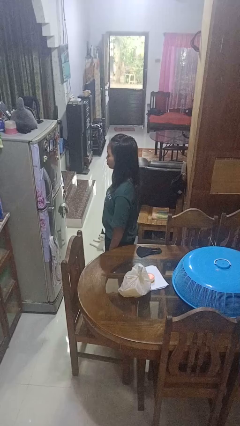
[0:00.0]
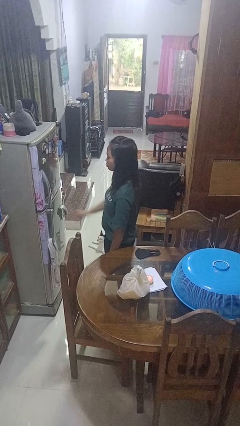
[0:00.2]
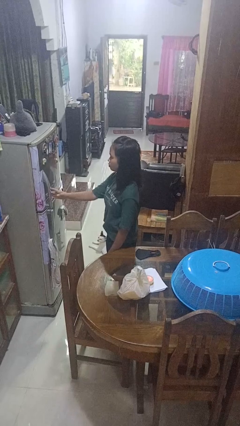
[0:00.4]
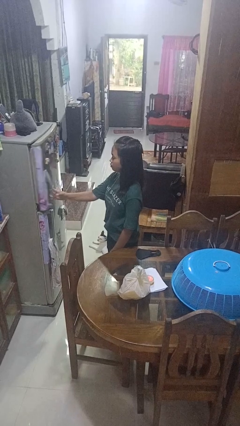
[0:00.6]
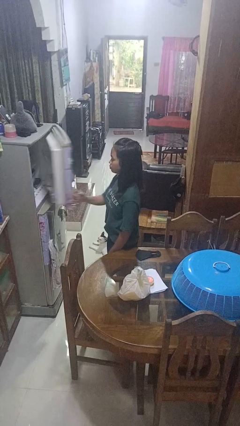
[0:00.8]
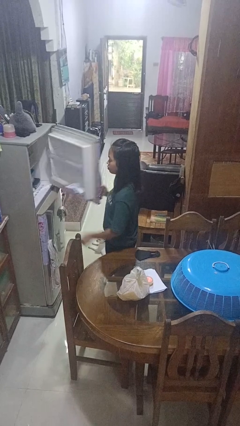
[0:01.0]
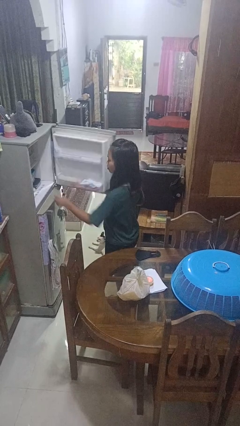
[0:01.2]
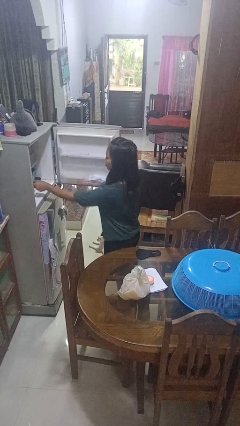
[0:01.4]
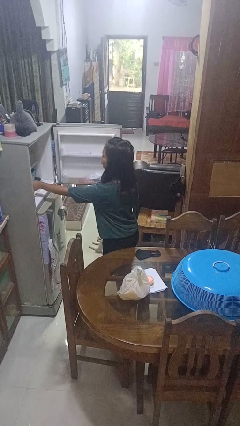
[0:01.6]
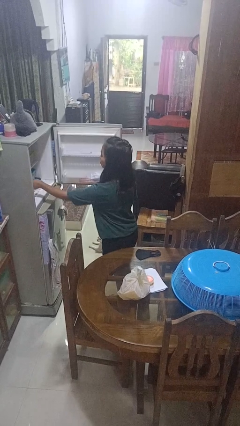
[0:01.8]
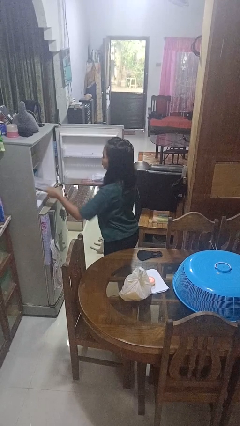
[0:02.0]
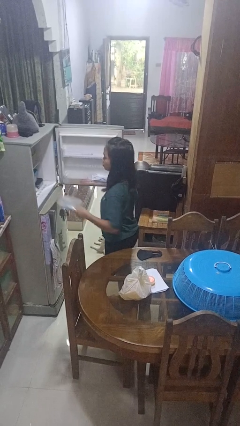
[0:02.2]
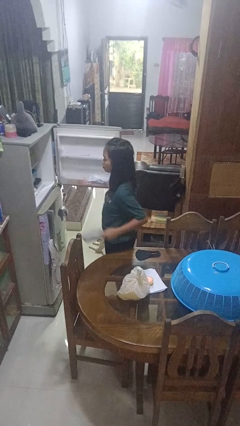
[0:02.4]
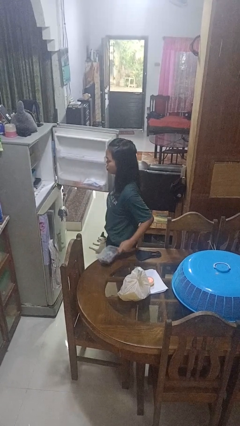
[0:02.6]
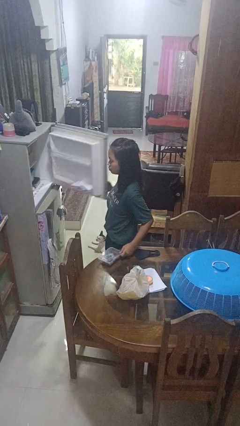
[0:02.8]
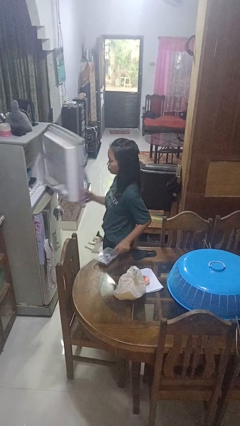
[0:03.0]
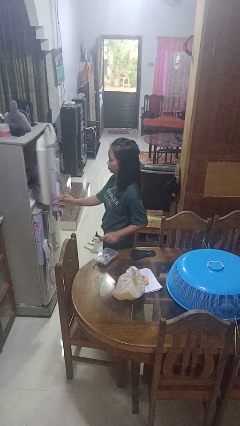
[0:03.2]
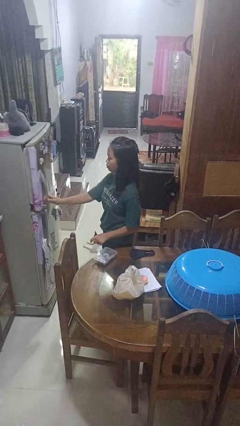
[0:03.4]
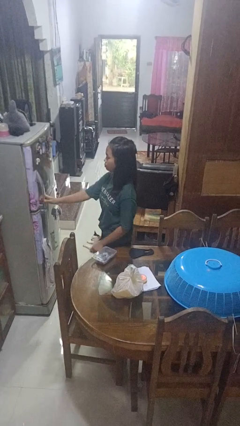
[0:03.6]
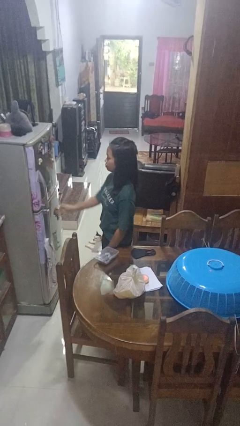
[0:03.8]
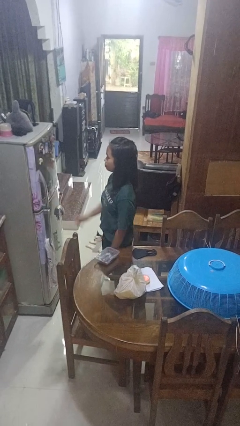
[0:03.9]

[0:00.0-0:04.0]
person takes object from refrigerator

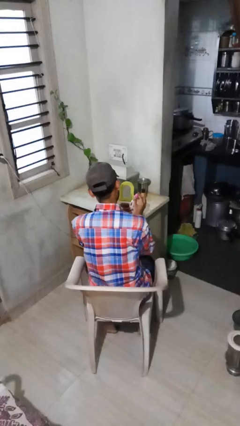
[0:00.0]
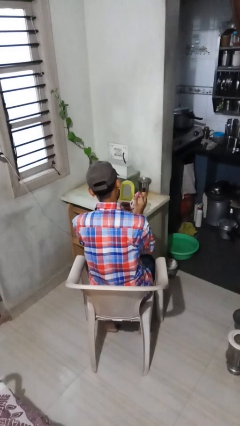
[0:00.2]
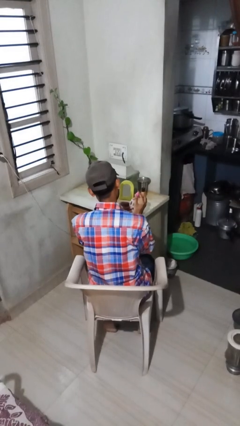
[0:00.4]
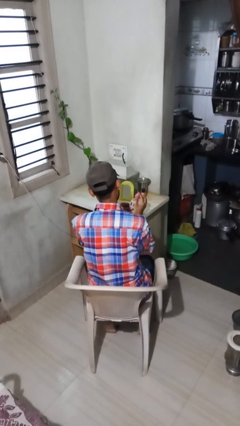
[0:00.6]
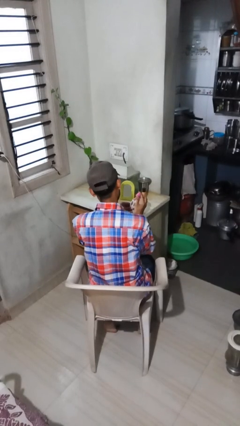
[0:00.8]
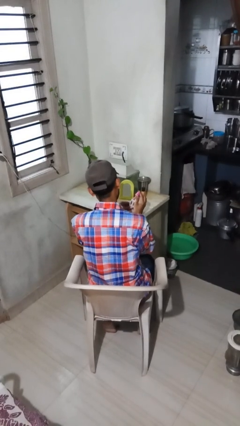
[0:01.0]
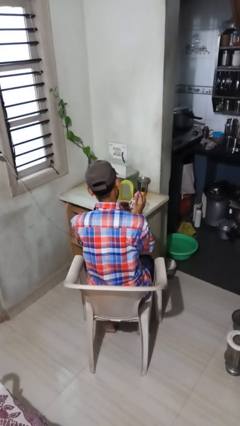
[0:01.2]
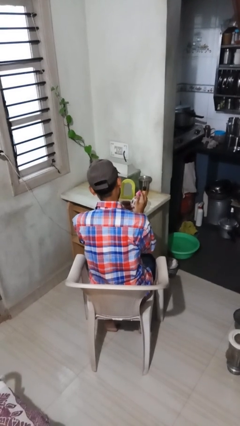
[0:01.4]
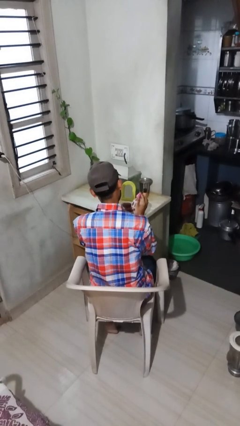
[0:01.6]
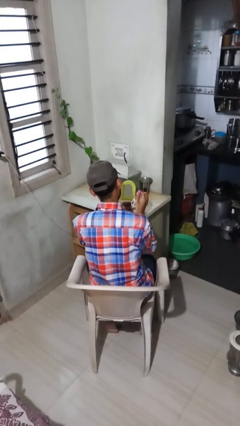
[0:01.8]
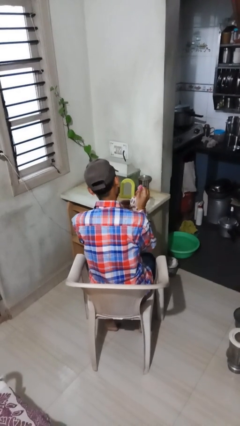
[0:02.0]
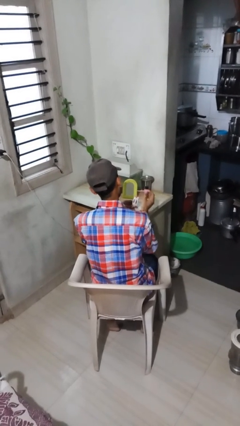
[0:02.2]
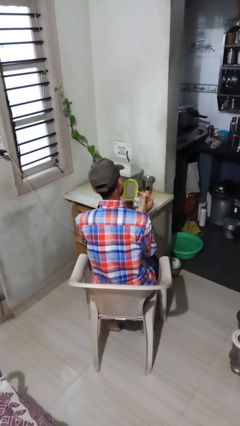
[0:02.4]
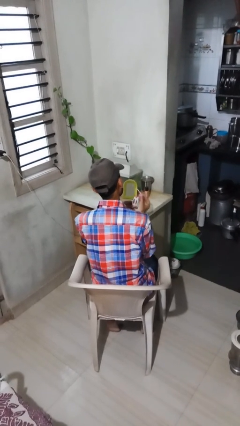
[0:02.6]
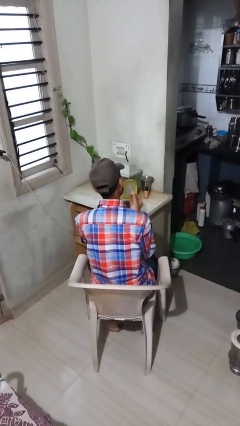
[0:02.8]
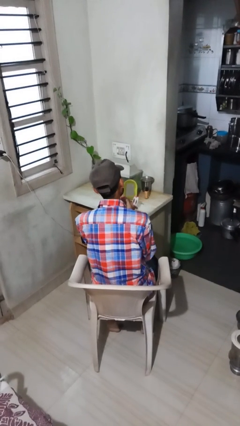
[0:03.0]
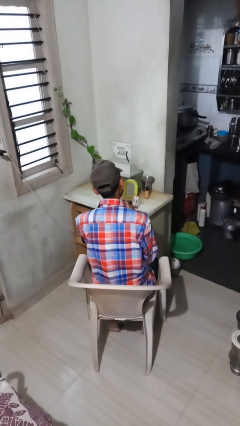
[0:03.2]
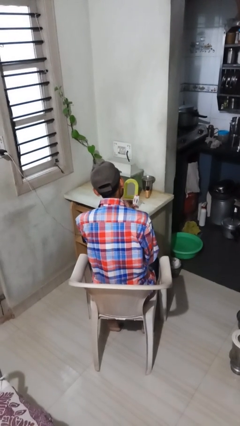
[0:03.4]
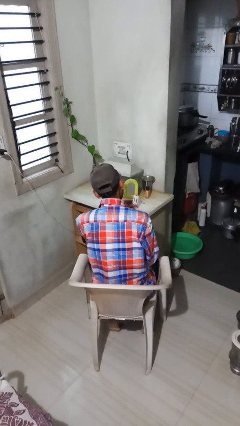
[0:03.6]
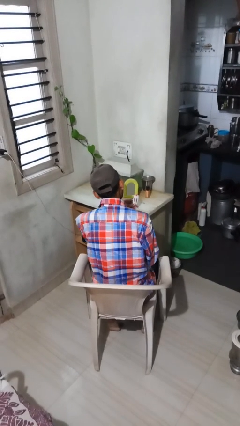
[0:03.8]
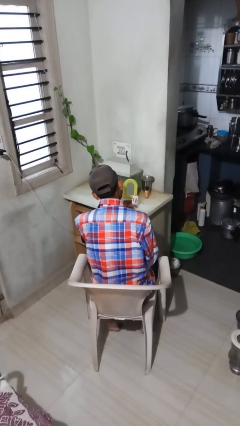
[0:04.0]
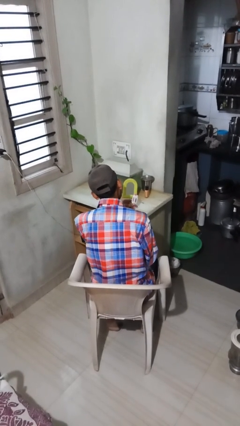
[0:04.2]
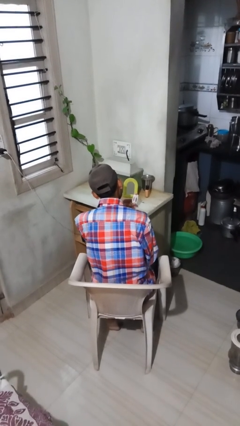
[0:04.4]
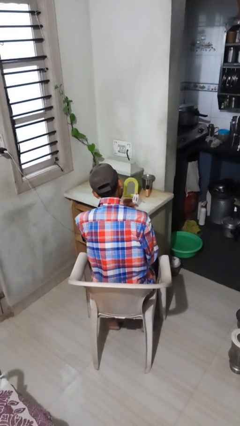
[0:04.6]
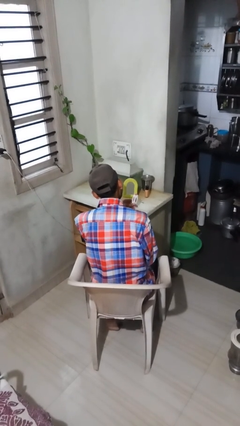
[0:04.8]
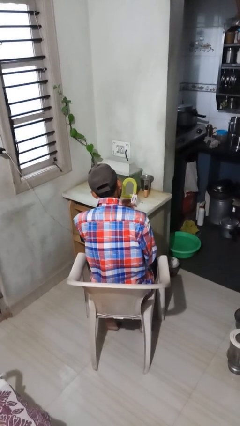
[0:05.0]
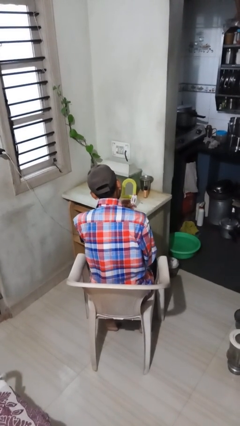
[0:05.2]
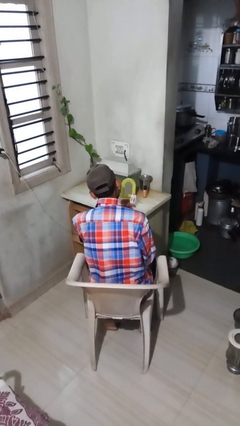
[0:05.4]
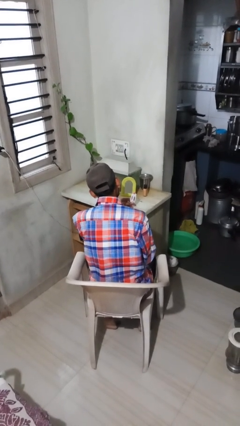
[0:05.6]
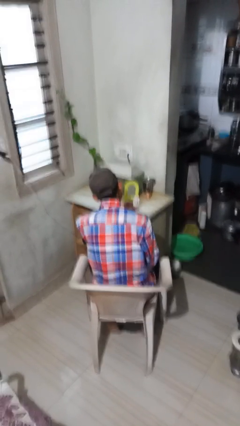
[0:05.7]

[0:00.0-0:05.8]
person applies lip makeup

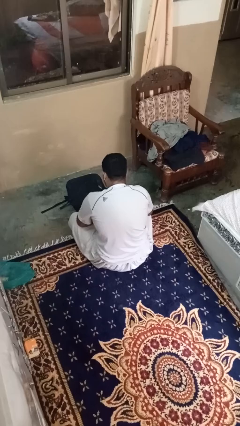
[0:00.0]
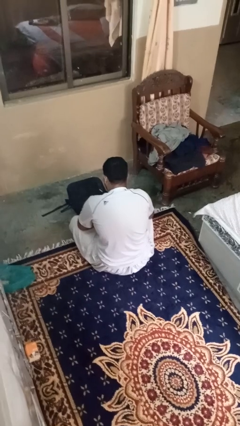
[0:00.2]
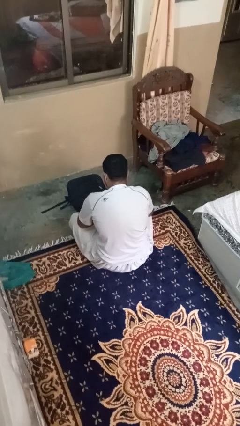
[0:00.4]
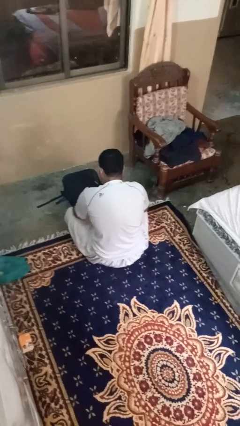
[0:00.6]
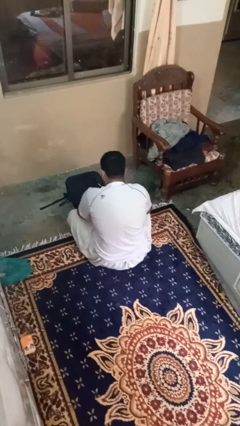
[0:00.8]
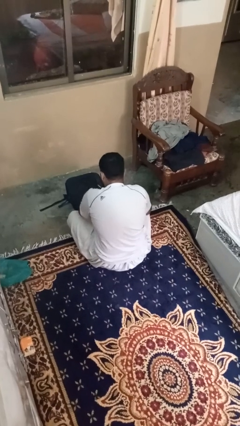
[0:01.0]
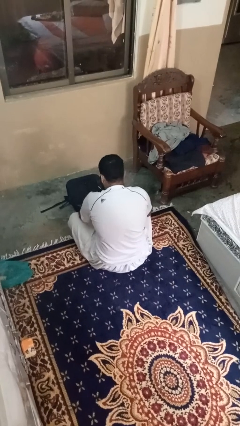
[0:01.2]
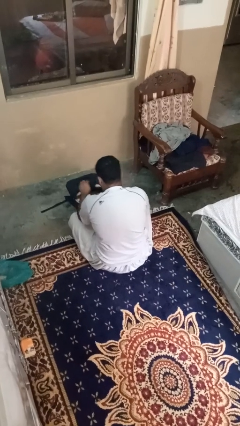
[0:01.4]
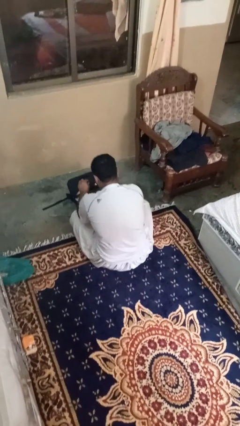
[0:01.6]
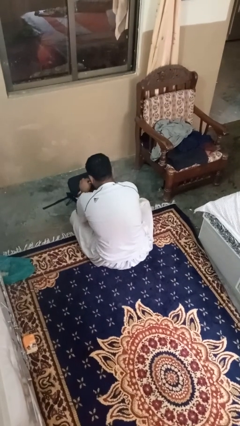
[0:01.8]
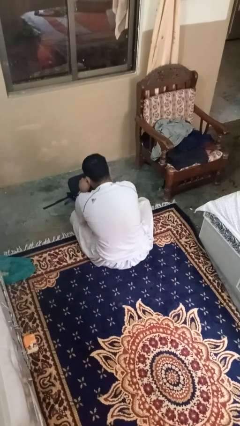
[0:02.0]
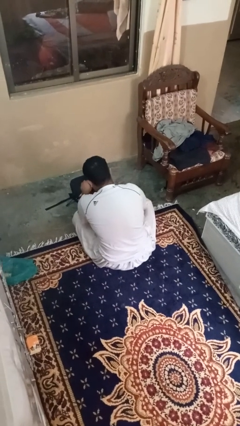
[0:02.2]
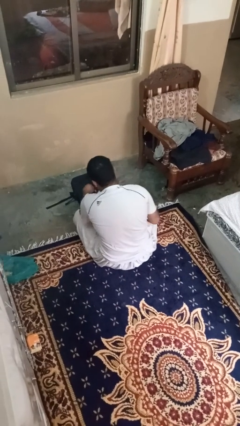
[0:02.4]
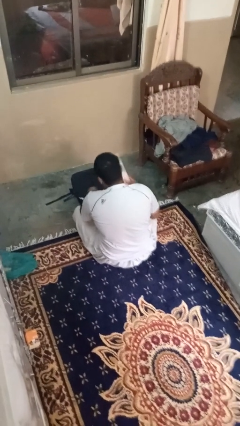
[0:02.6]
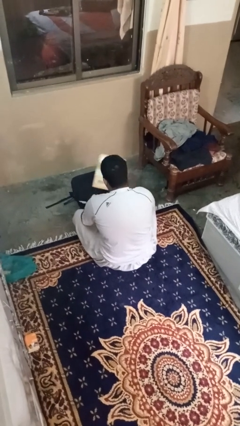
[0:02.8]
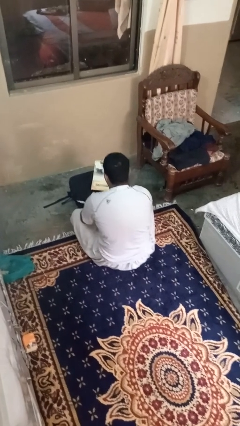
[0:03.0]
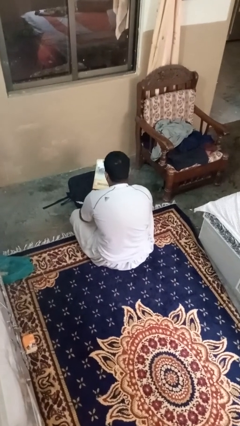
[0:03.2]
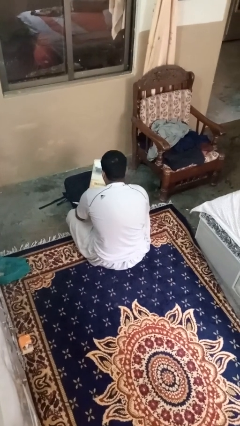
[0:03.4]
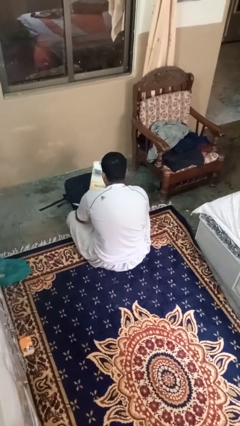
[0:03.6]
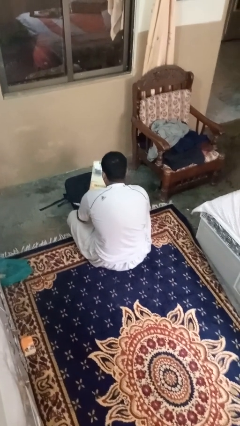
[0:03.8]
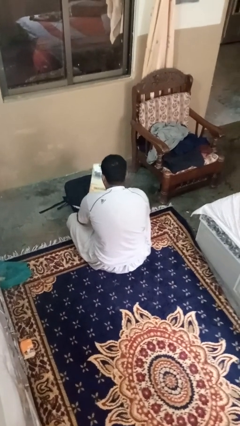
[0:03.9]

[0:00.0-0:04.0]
person takes object from bag

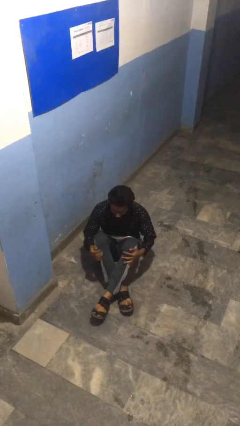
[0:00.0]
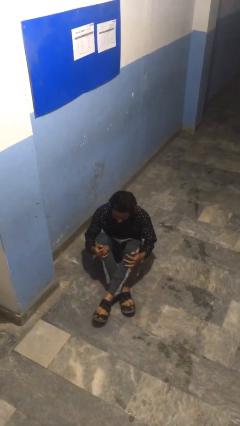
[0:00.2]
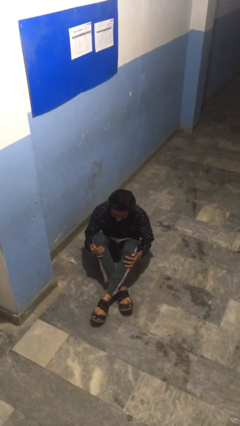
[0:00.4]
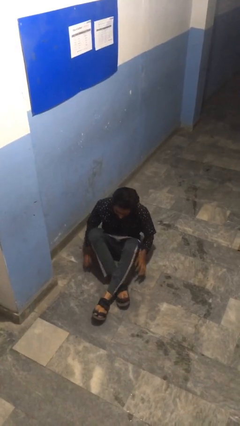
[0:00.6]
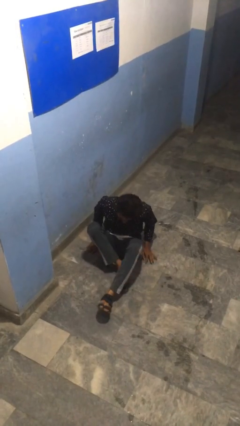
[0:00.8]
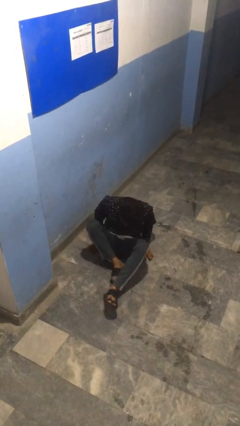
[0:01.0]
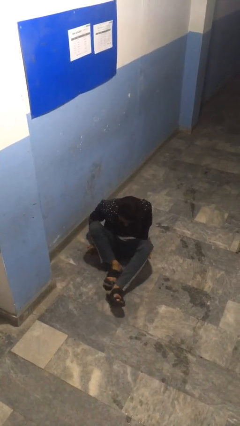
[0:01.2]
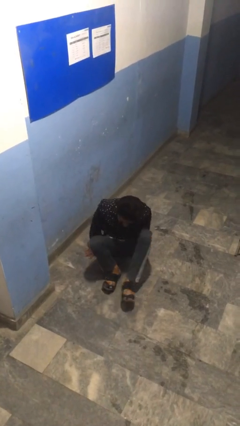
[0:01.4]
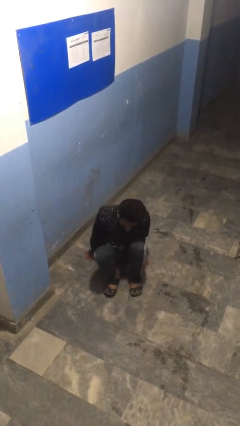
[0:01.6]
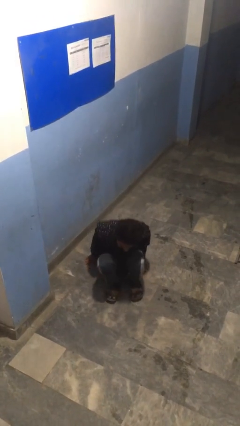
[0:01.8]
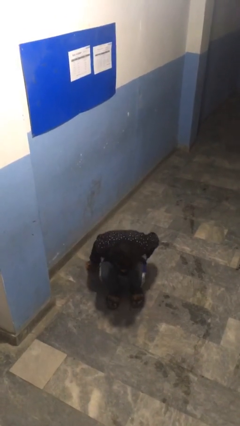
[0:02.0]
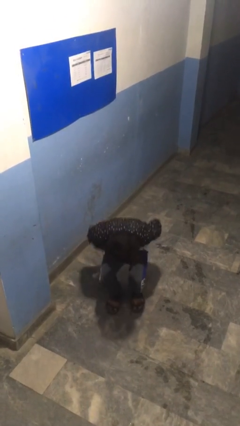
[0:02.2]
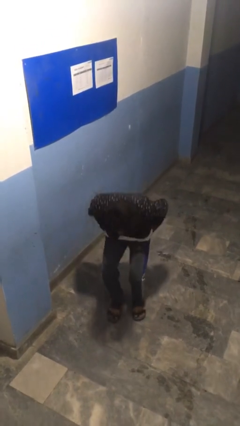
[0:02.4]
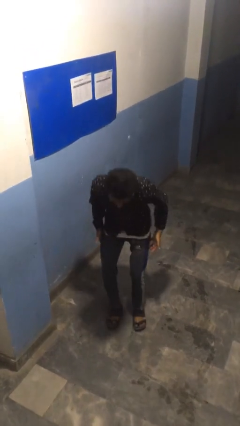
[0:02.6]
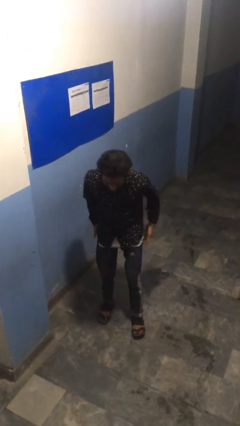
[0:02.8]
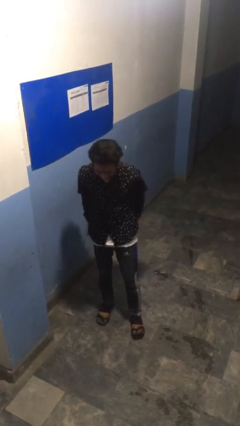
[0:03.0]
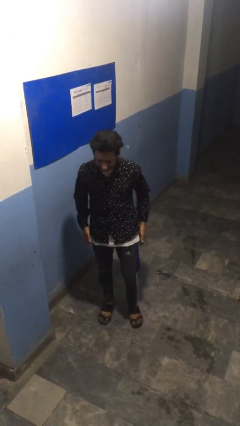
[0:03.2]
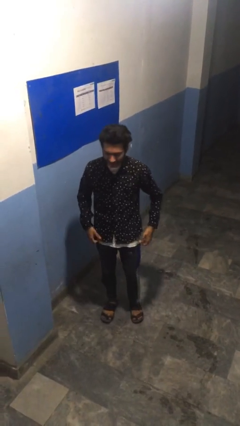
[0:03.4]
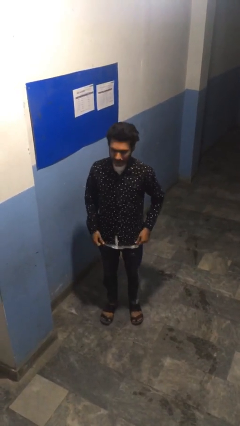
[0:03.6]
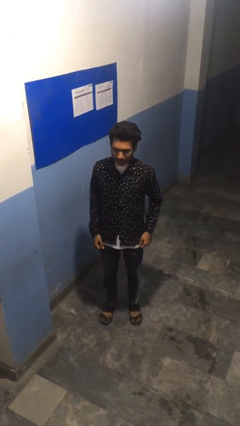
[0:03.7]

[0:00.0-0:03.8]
person stands up from floor
